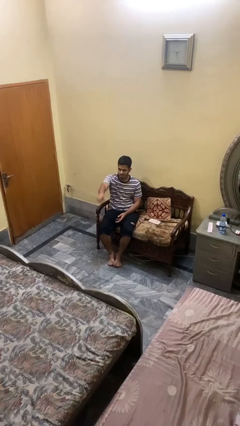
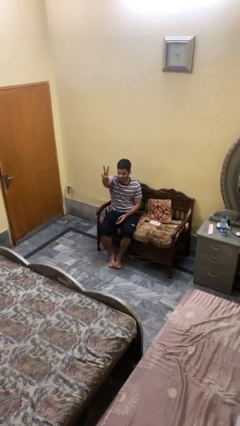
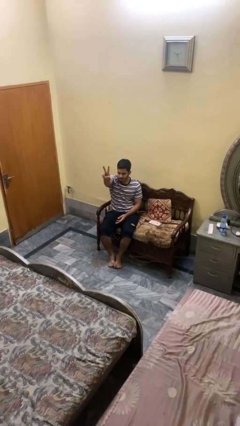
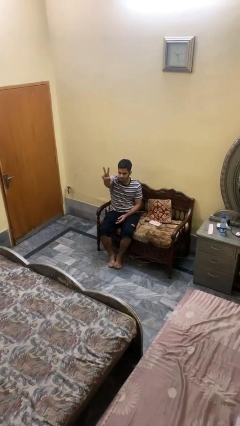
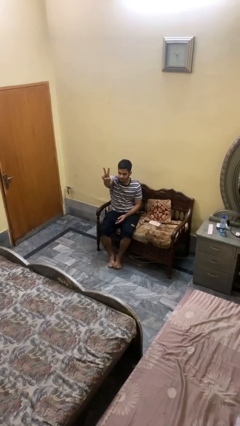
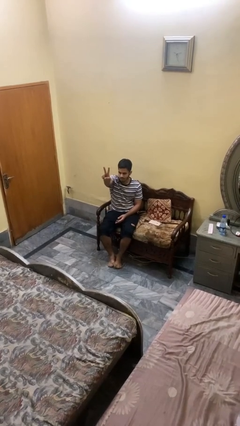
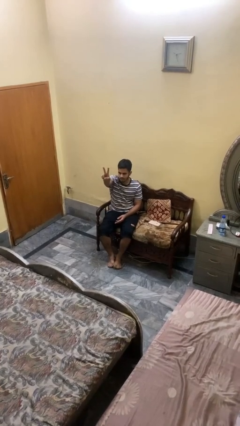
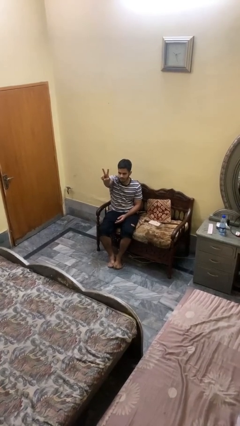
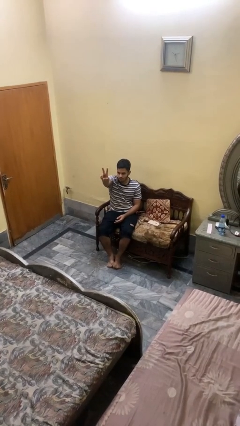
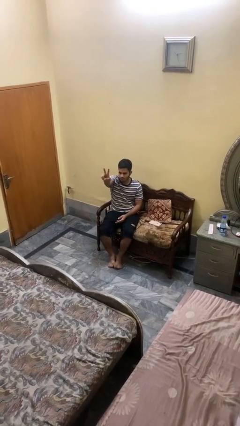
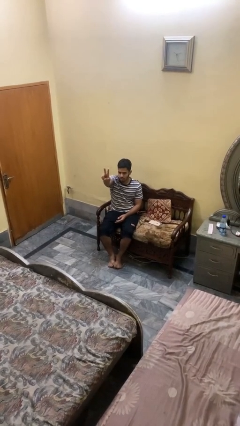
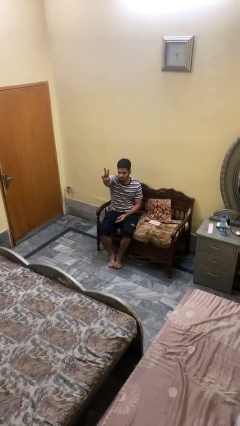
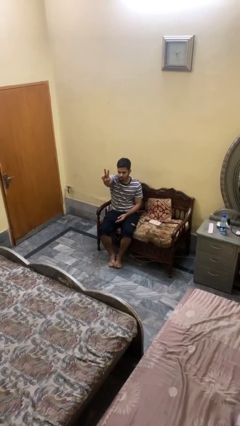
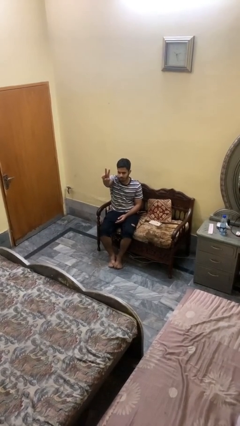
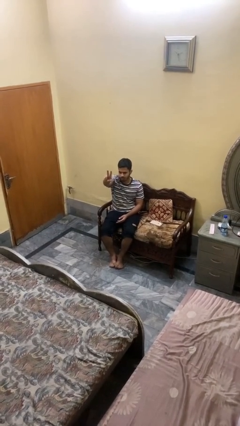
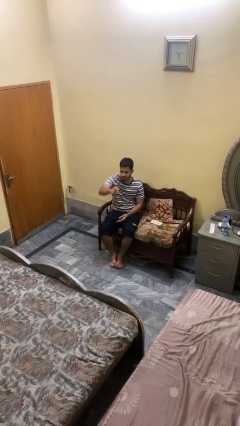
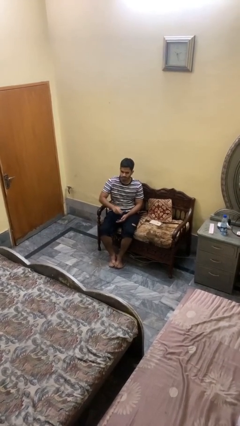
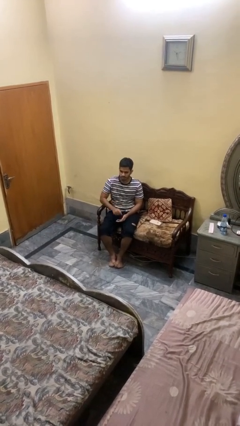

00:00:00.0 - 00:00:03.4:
person gestures peace

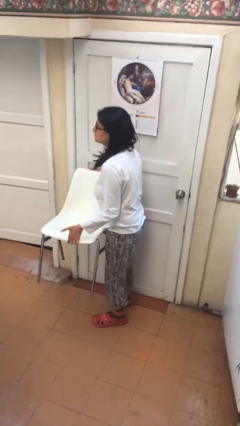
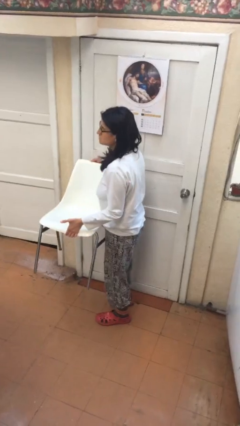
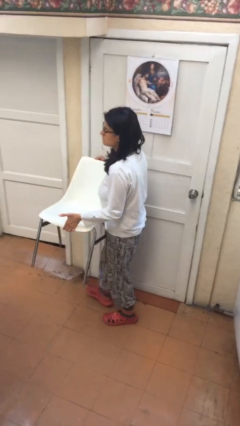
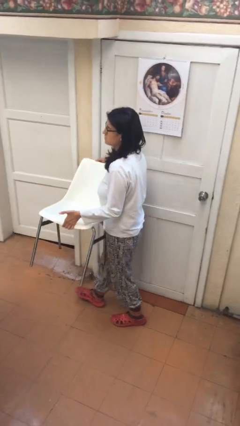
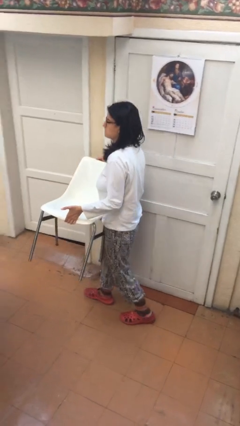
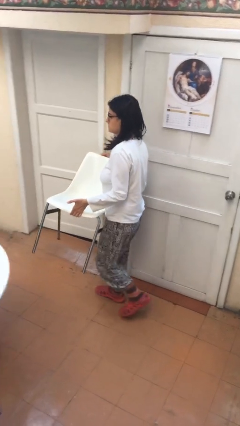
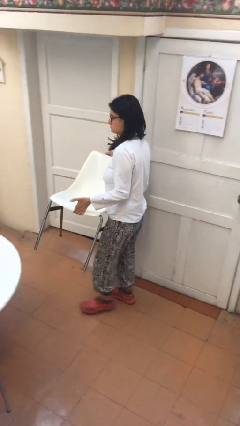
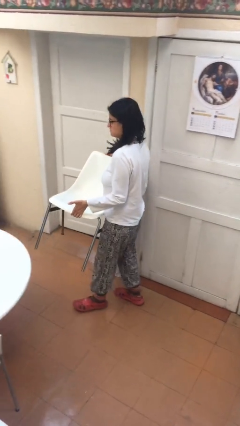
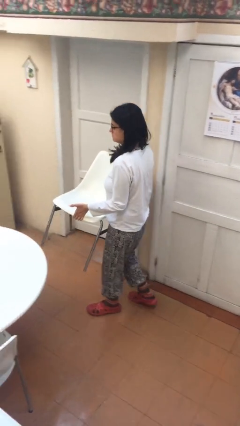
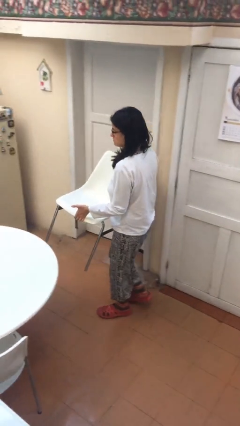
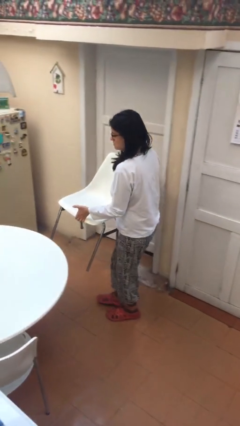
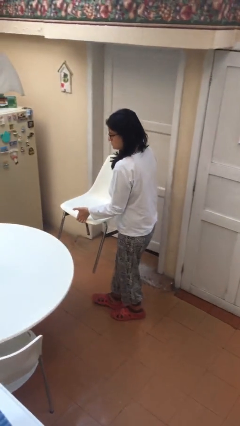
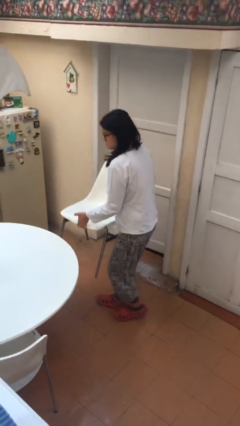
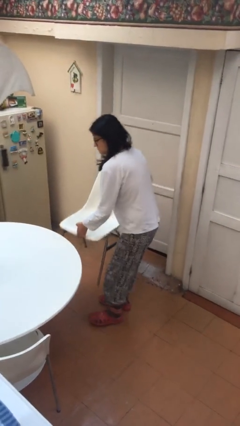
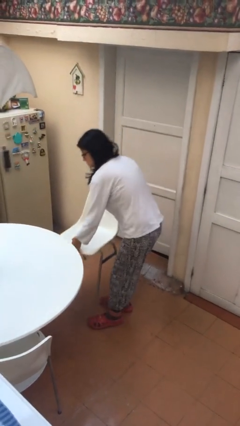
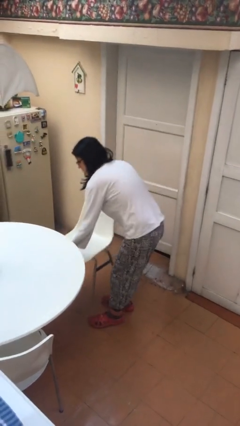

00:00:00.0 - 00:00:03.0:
person carries heavy object

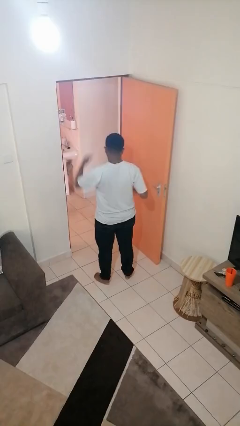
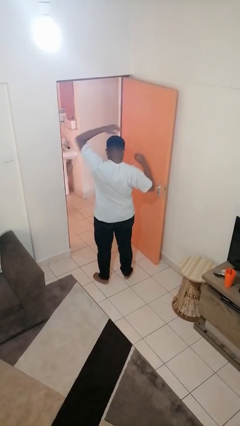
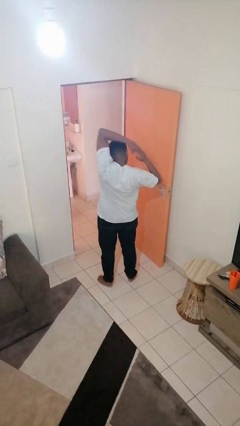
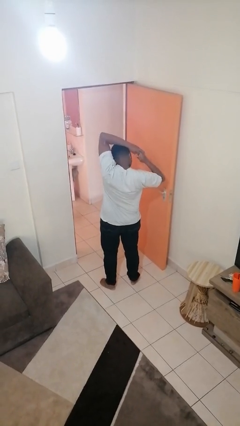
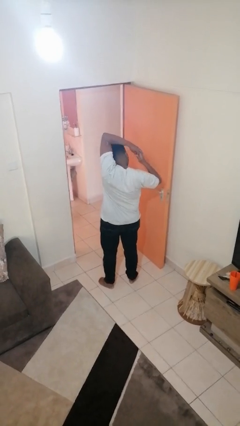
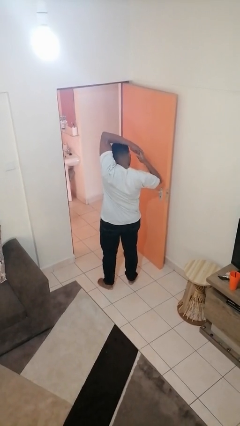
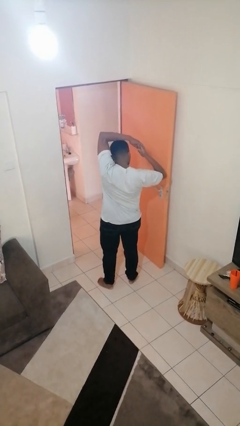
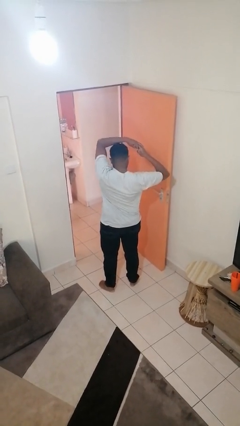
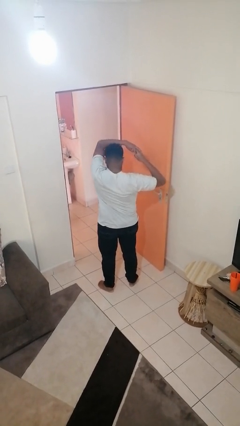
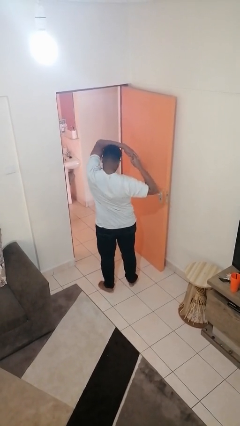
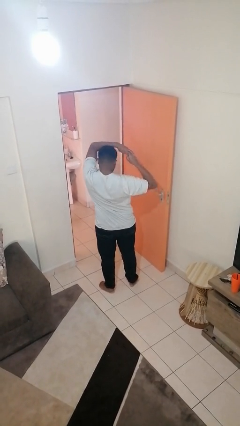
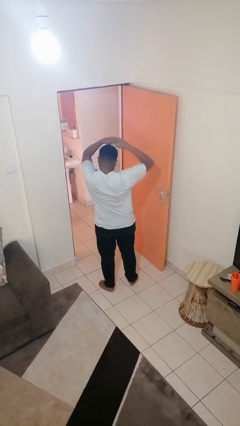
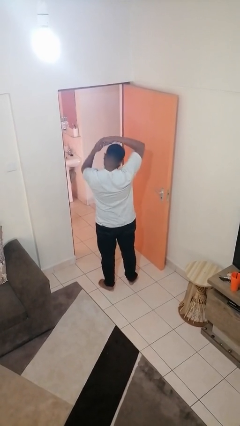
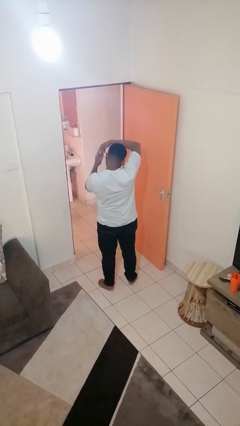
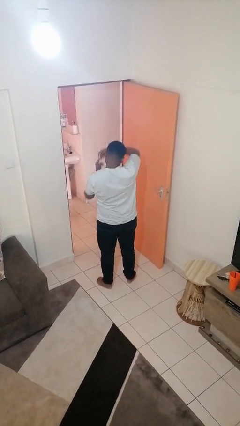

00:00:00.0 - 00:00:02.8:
person stretches arms over head

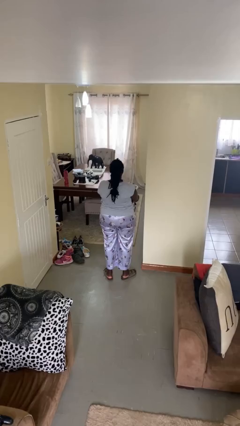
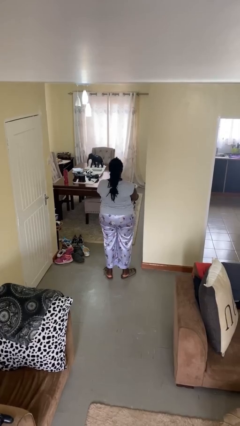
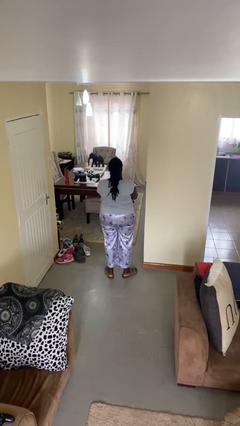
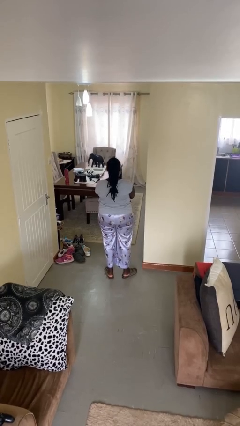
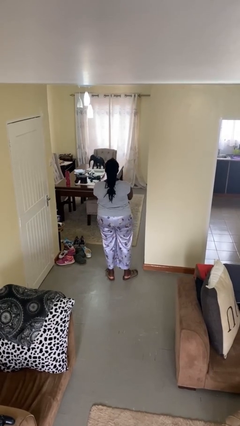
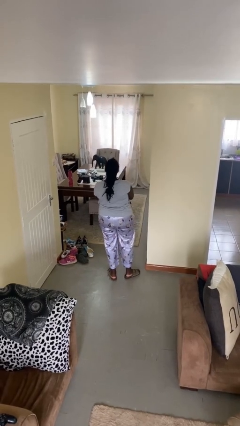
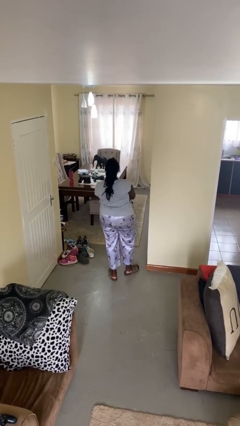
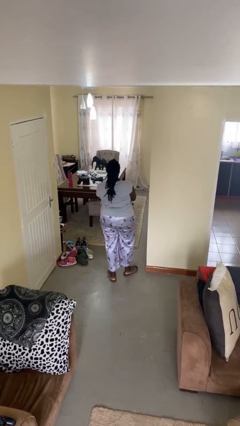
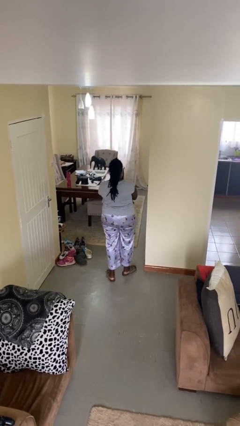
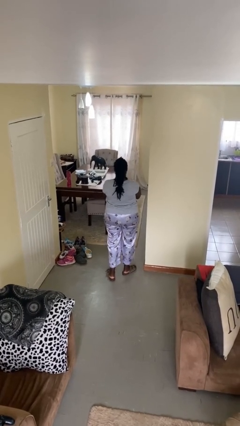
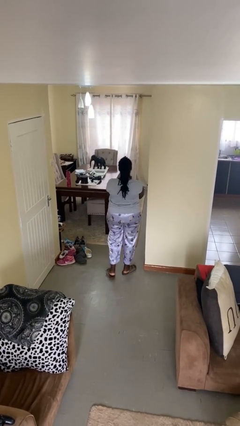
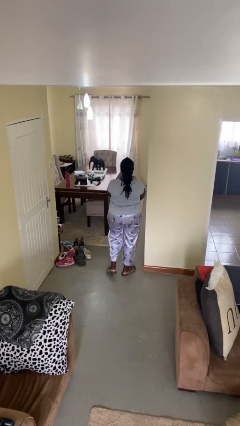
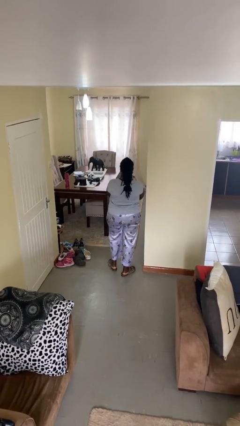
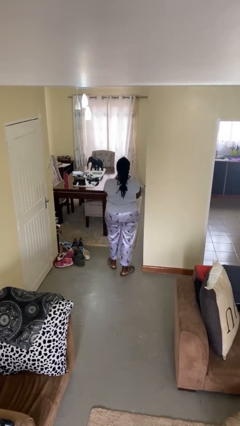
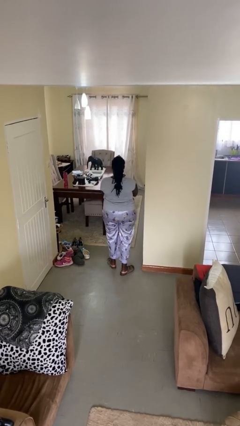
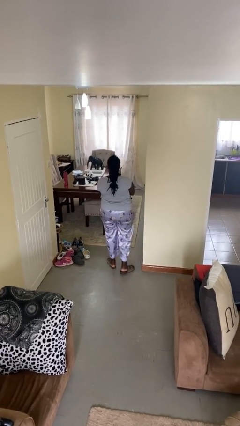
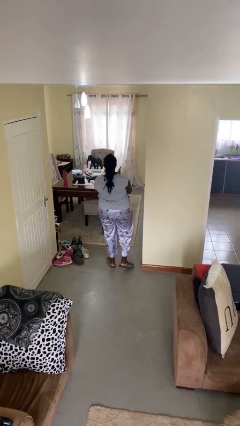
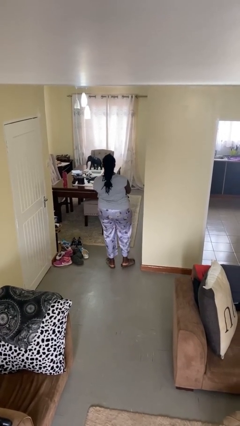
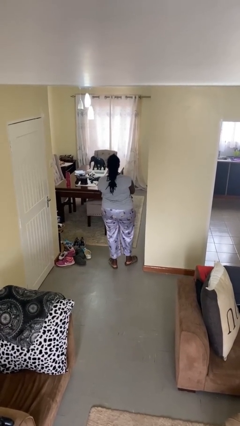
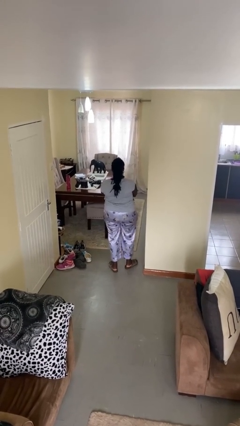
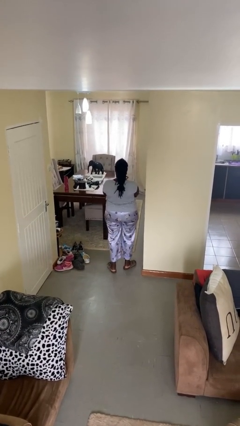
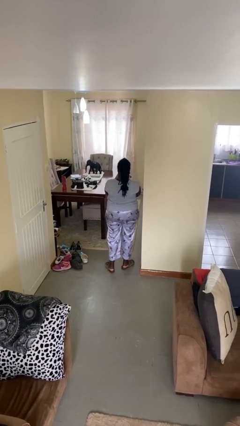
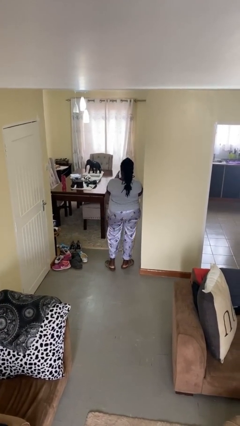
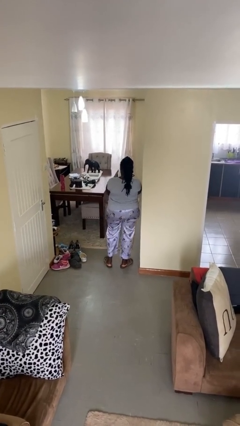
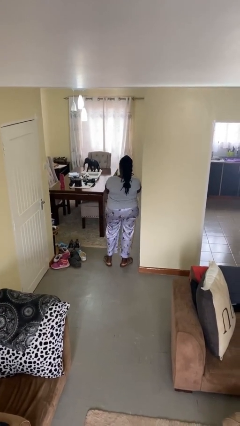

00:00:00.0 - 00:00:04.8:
person carries laundry basket

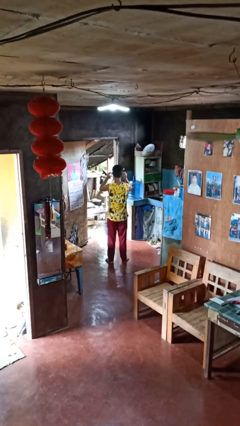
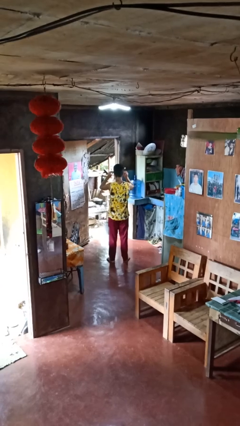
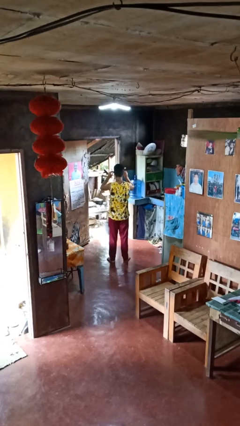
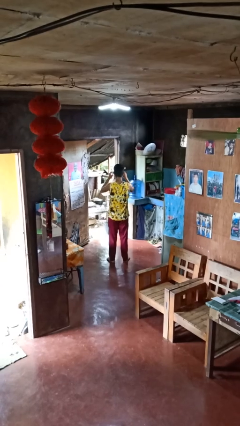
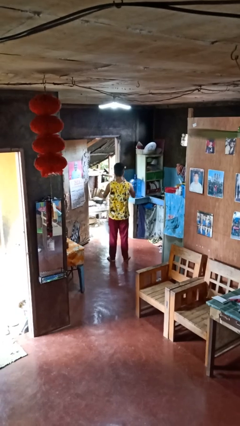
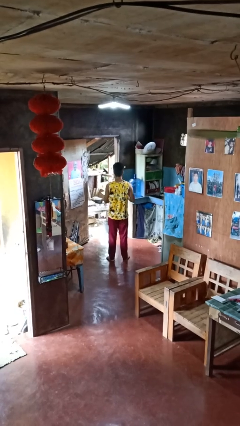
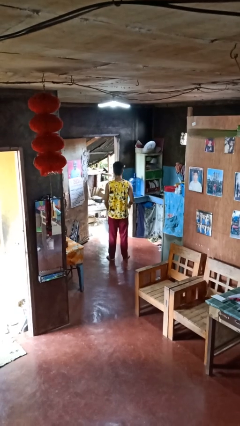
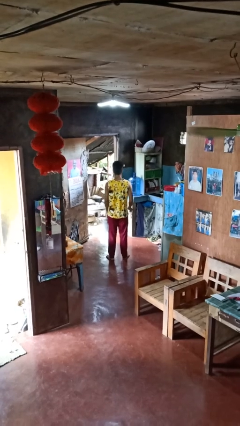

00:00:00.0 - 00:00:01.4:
person takes off glasses

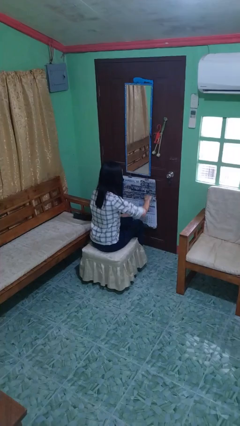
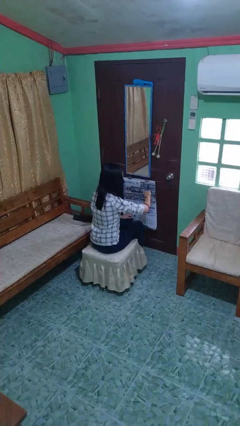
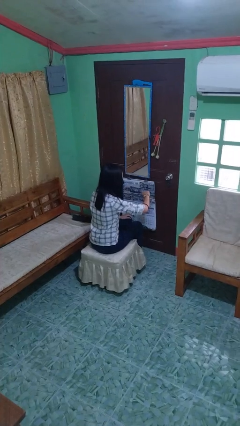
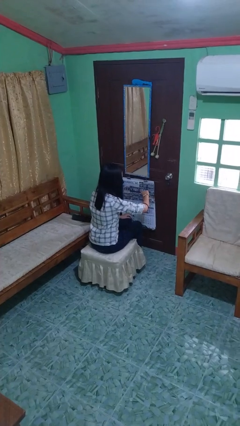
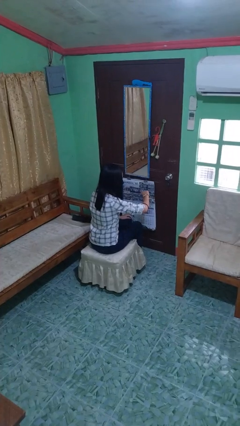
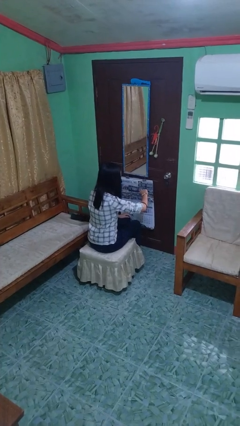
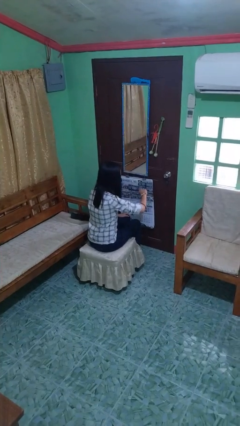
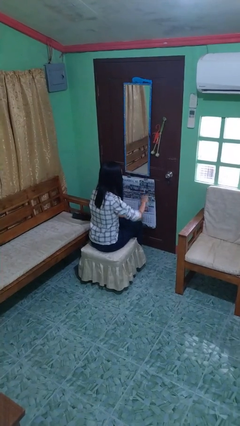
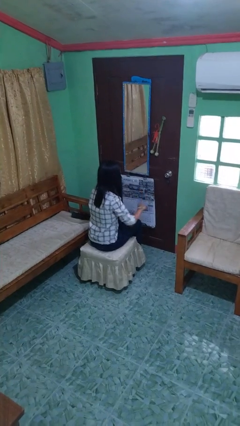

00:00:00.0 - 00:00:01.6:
person looks at wristwatch
